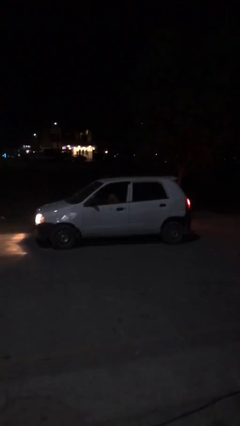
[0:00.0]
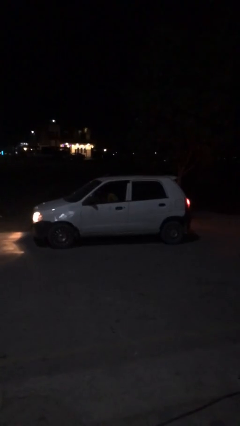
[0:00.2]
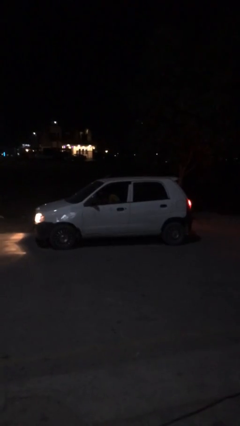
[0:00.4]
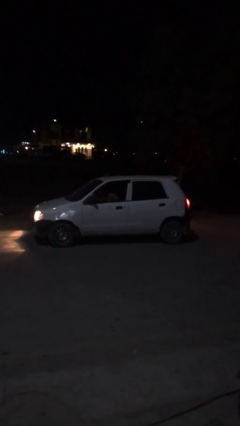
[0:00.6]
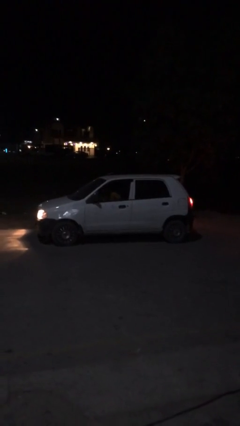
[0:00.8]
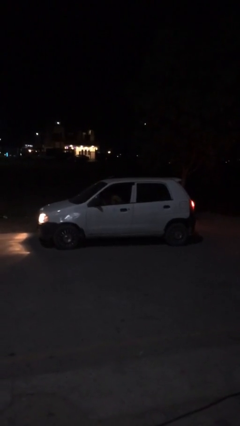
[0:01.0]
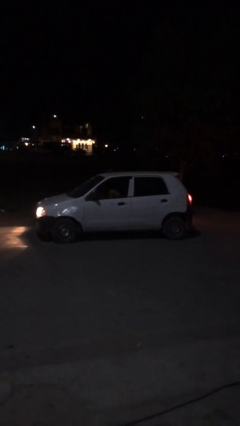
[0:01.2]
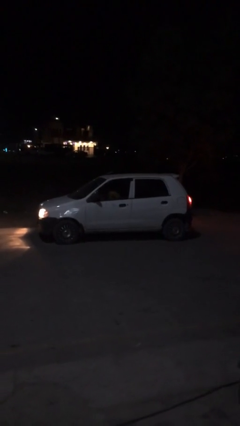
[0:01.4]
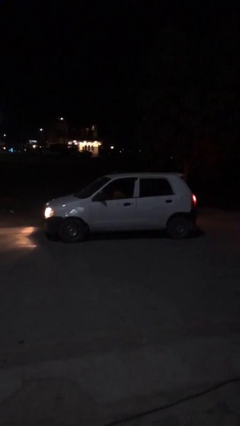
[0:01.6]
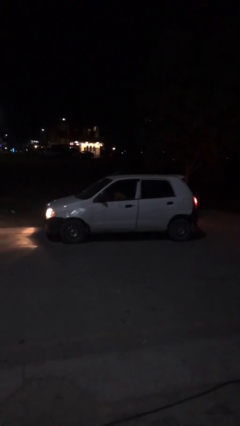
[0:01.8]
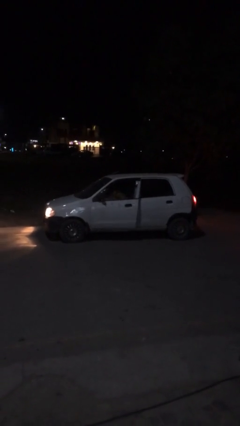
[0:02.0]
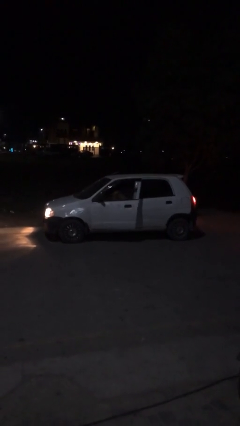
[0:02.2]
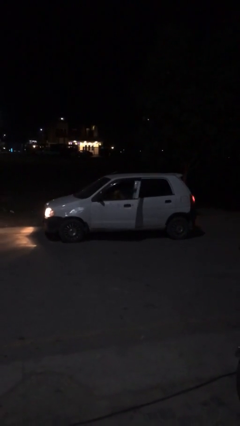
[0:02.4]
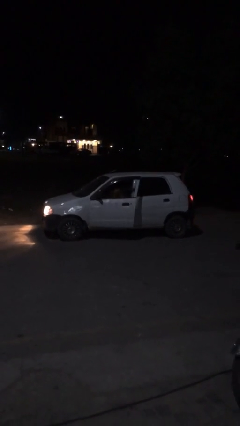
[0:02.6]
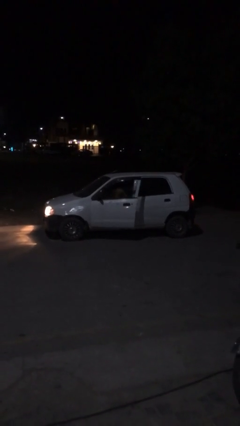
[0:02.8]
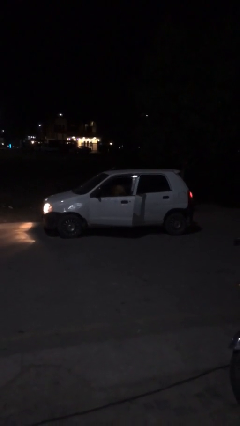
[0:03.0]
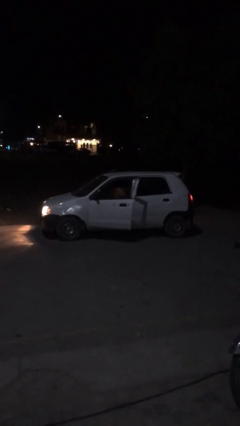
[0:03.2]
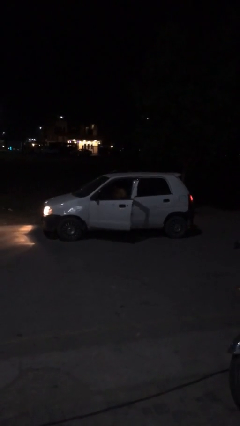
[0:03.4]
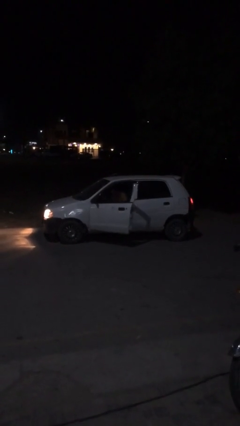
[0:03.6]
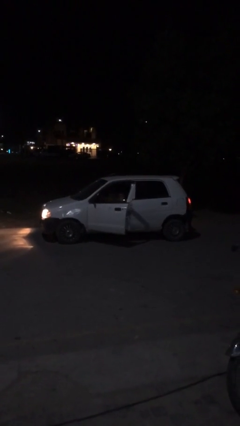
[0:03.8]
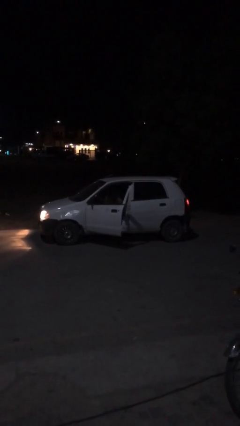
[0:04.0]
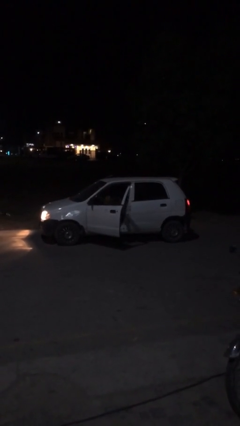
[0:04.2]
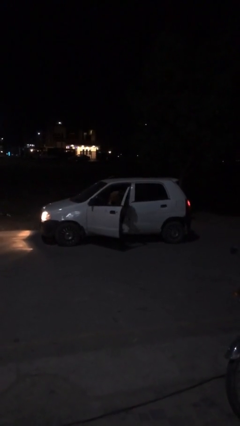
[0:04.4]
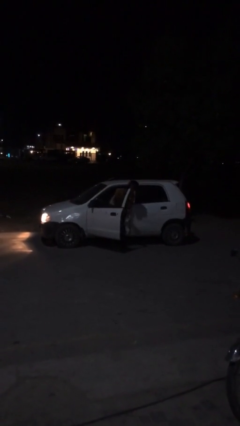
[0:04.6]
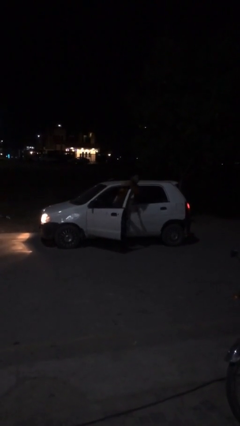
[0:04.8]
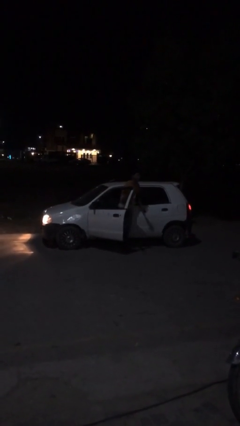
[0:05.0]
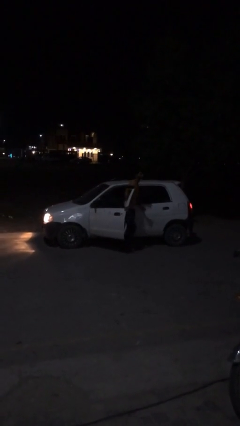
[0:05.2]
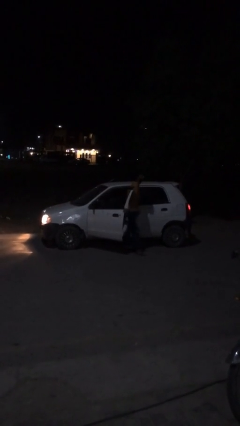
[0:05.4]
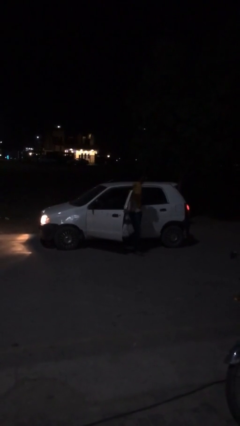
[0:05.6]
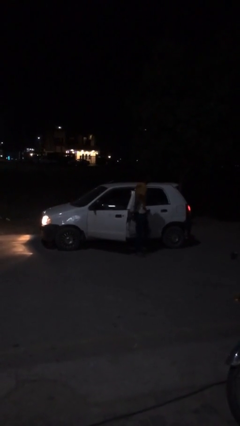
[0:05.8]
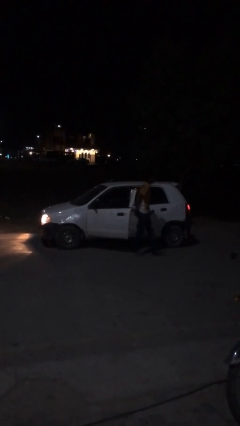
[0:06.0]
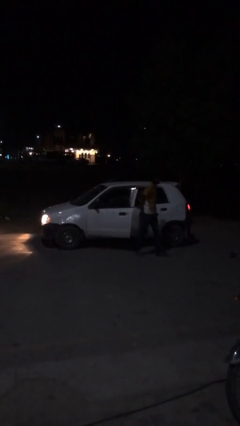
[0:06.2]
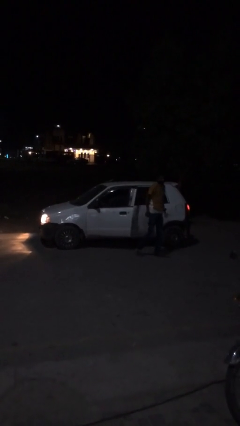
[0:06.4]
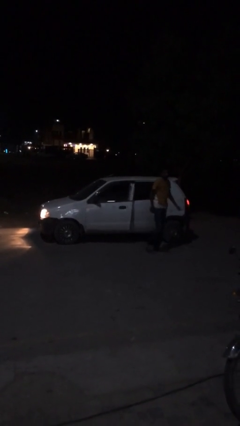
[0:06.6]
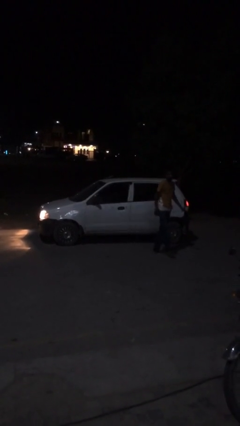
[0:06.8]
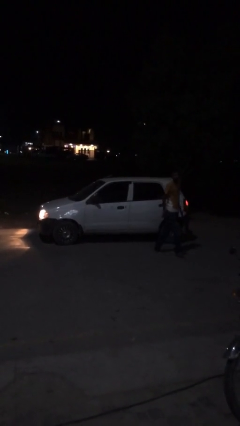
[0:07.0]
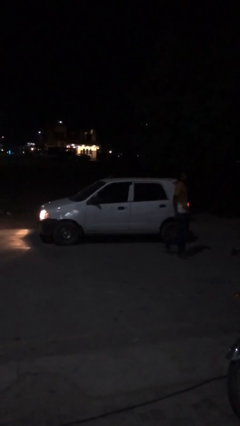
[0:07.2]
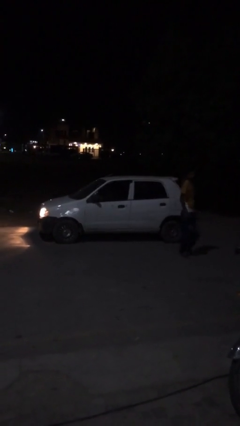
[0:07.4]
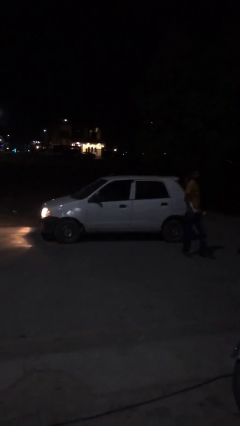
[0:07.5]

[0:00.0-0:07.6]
car drops off person

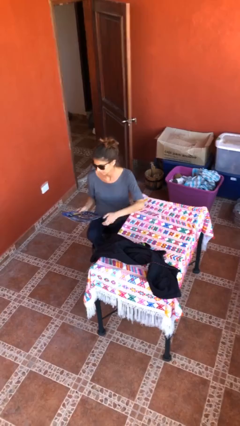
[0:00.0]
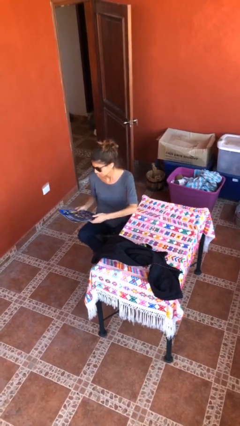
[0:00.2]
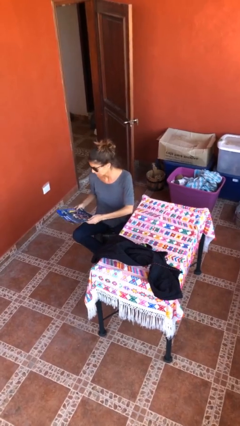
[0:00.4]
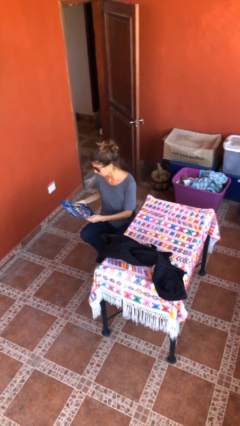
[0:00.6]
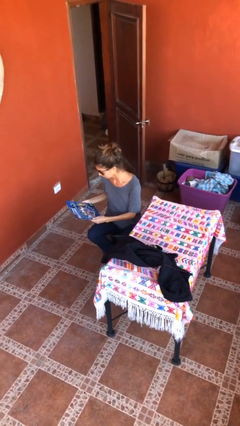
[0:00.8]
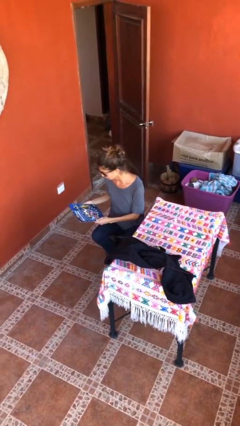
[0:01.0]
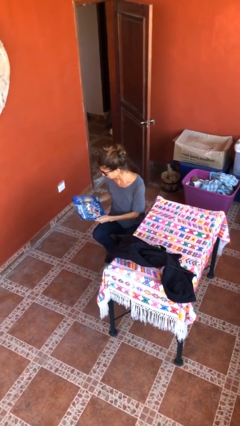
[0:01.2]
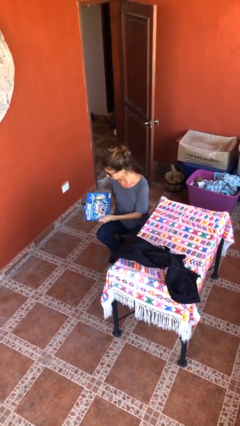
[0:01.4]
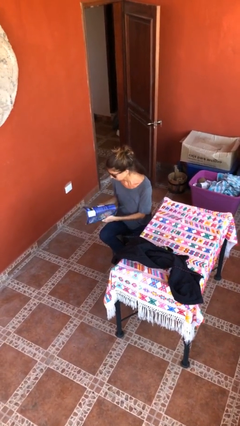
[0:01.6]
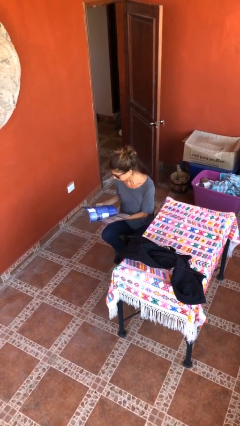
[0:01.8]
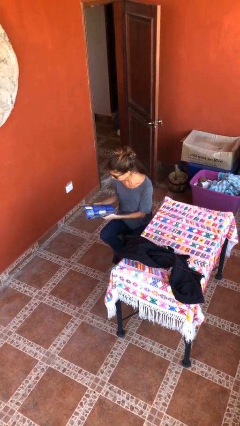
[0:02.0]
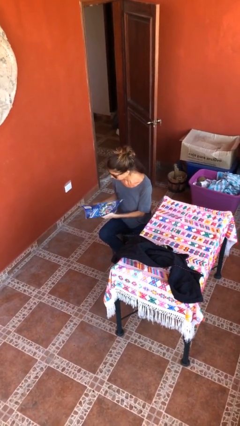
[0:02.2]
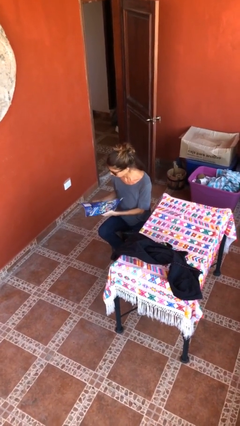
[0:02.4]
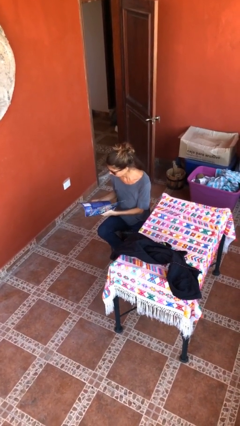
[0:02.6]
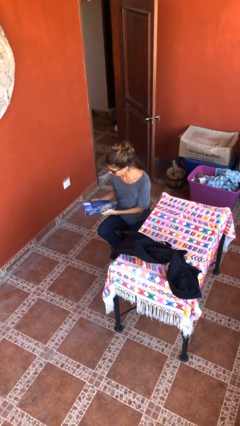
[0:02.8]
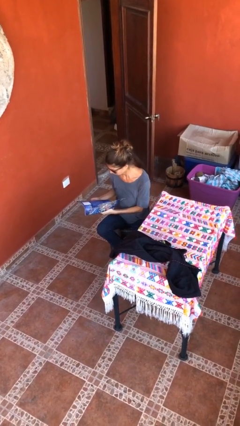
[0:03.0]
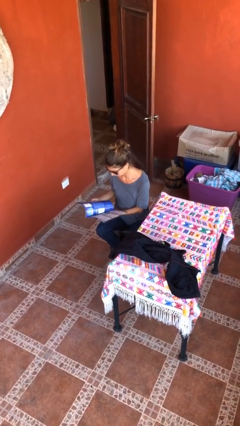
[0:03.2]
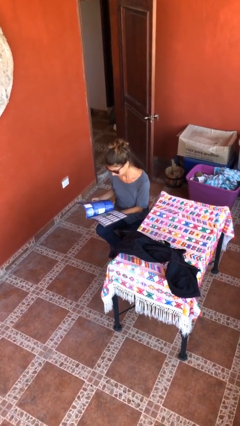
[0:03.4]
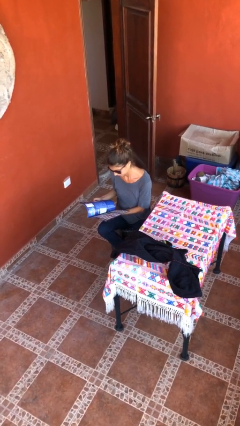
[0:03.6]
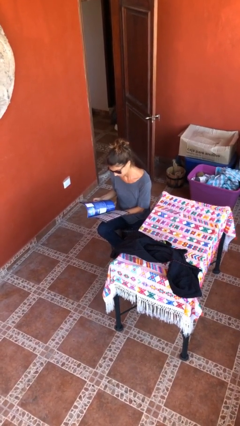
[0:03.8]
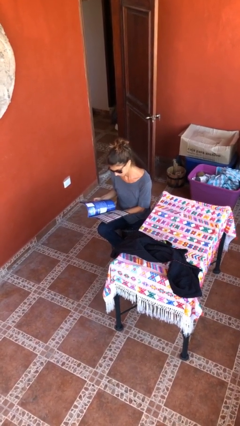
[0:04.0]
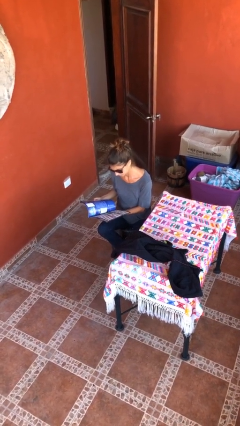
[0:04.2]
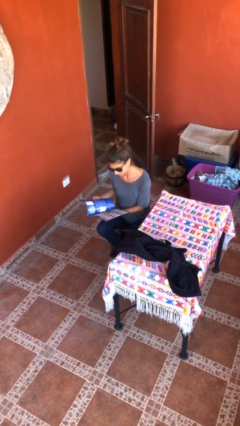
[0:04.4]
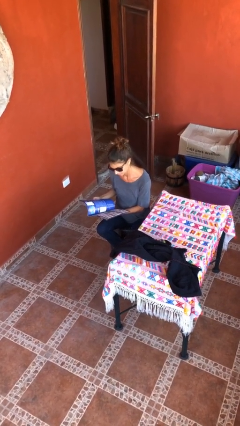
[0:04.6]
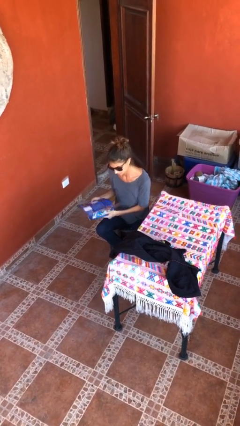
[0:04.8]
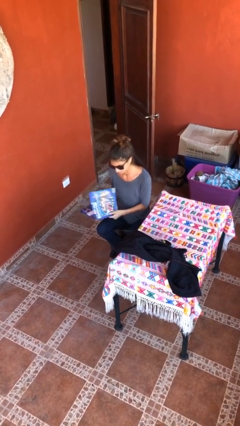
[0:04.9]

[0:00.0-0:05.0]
person reads document

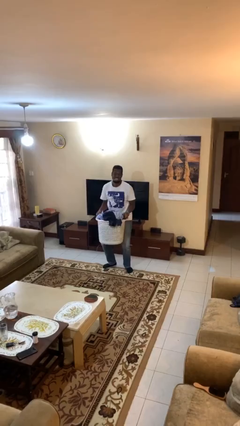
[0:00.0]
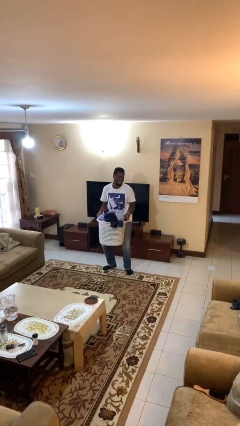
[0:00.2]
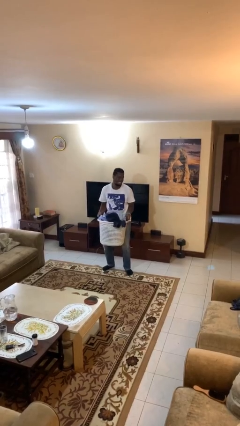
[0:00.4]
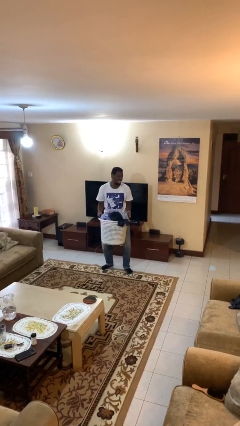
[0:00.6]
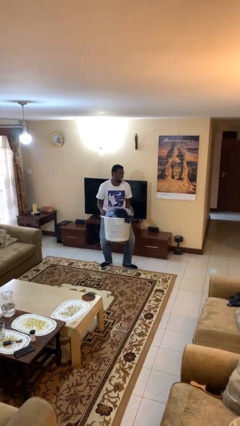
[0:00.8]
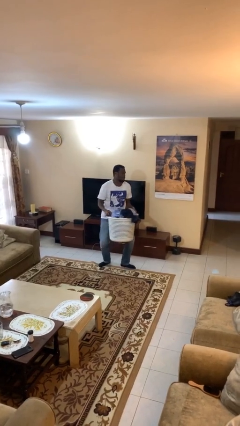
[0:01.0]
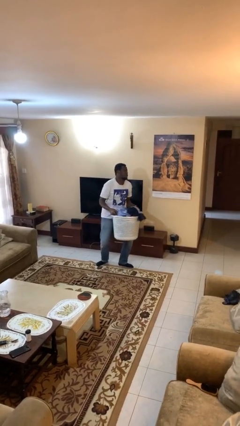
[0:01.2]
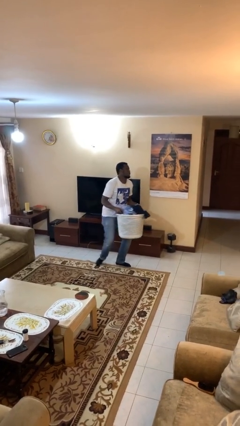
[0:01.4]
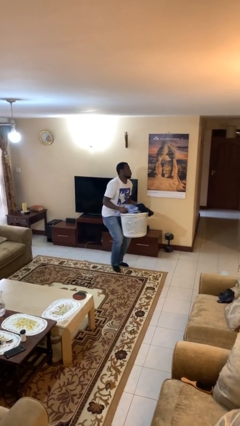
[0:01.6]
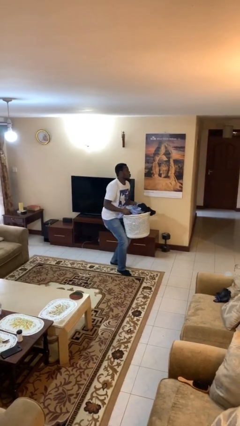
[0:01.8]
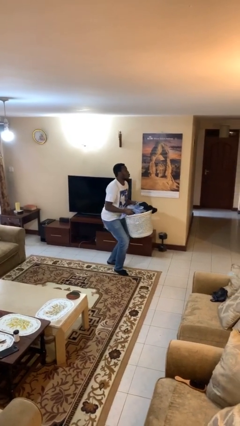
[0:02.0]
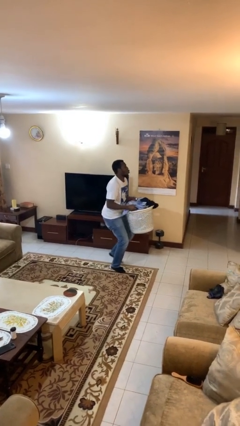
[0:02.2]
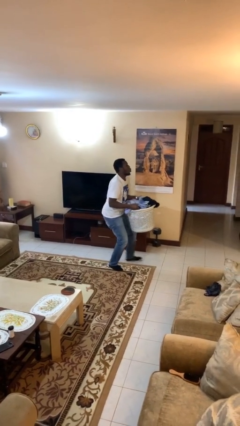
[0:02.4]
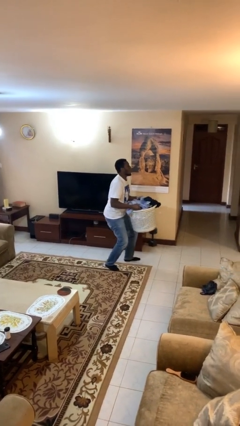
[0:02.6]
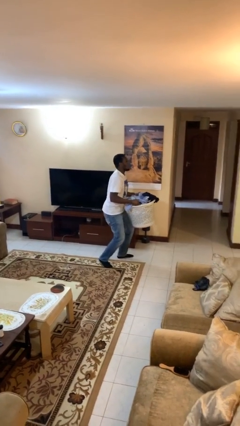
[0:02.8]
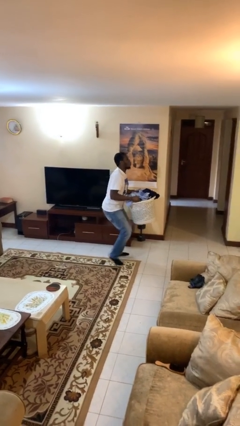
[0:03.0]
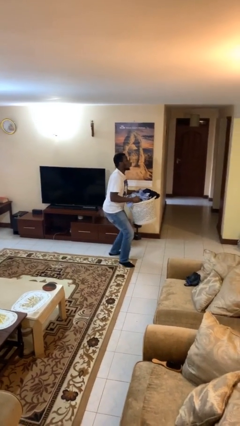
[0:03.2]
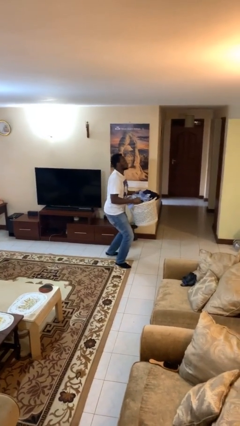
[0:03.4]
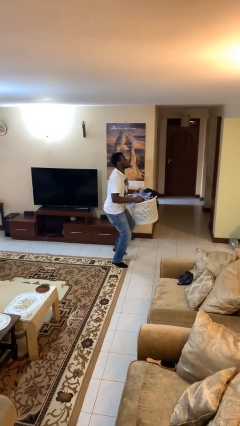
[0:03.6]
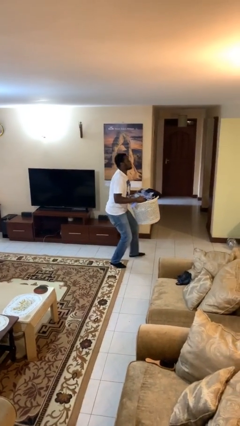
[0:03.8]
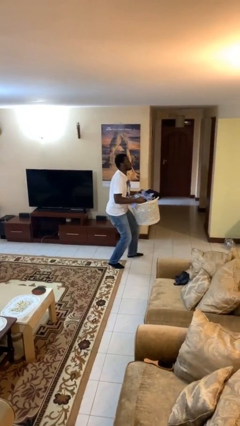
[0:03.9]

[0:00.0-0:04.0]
person carries heavy object

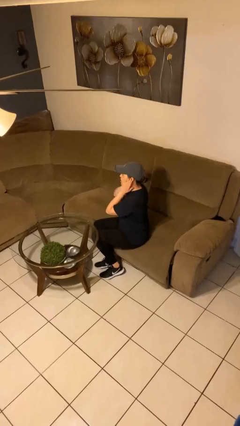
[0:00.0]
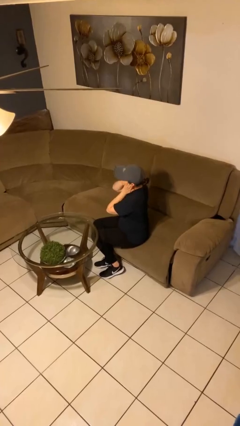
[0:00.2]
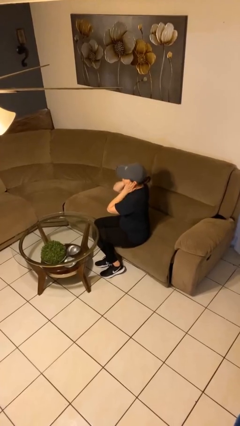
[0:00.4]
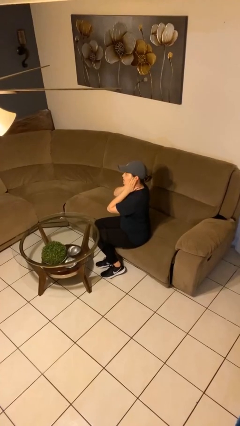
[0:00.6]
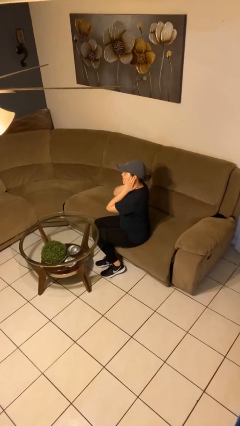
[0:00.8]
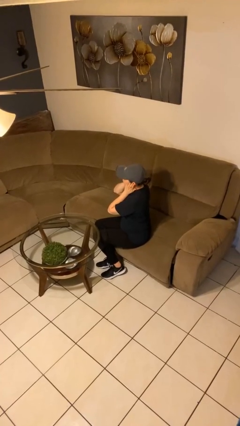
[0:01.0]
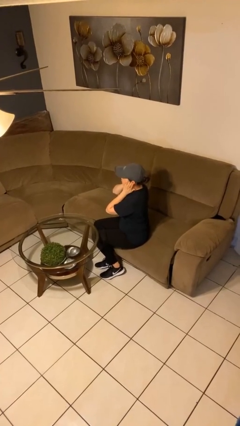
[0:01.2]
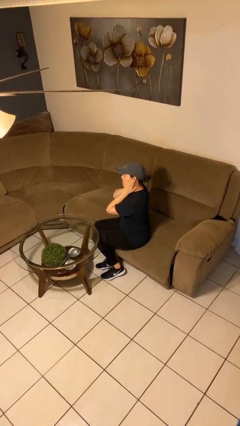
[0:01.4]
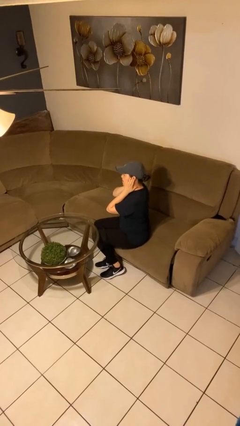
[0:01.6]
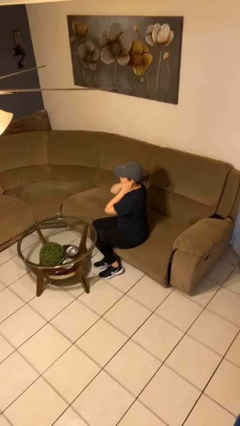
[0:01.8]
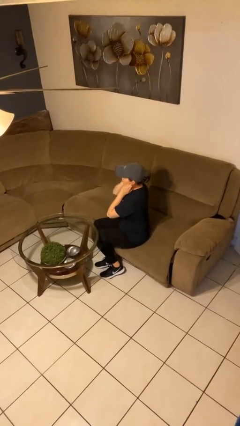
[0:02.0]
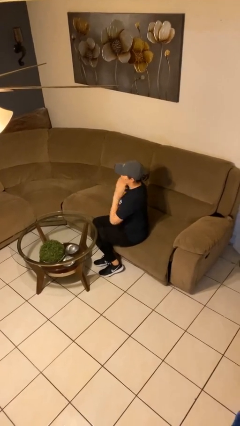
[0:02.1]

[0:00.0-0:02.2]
person puts fingers in ear
